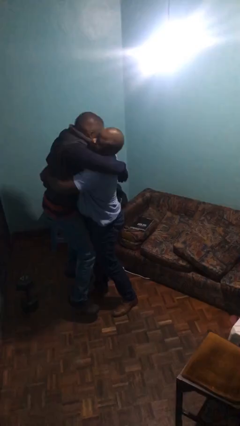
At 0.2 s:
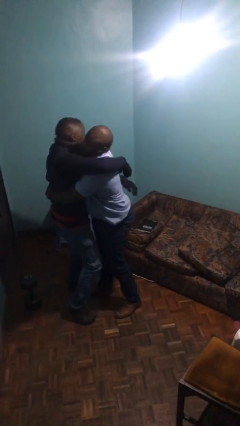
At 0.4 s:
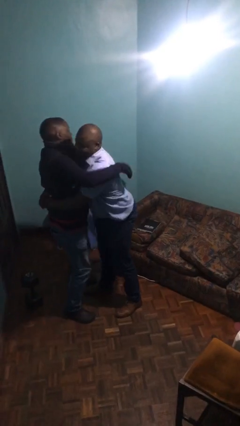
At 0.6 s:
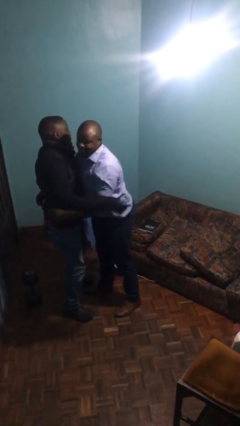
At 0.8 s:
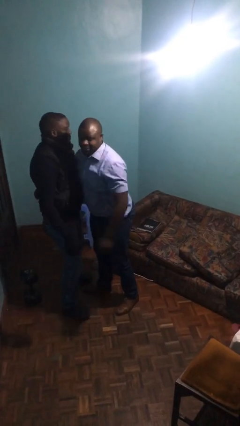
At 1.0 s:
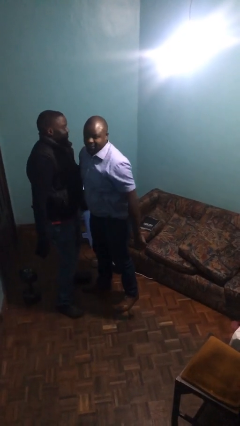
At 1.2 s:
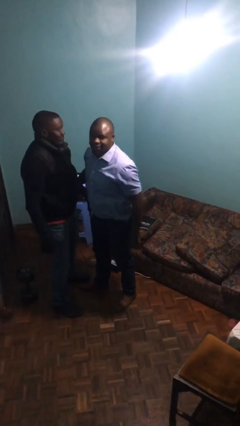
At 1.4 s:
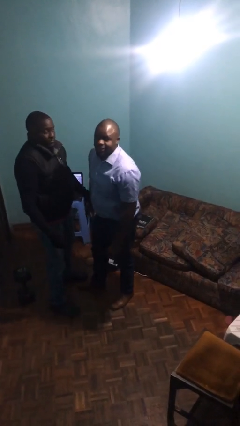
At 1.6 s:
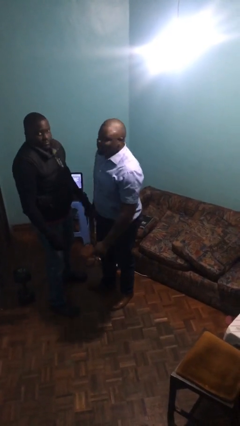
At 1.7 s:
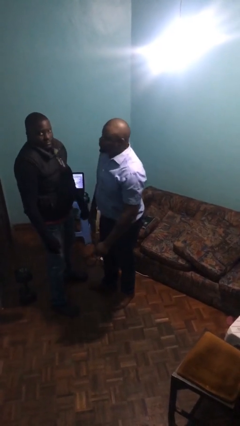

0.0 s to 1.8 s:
person puts down person

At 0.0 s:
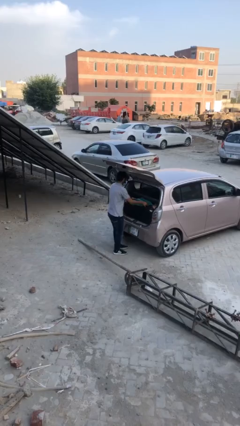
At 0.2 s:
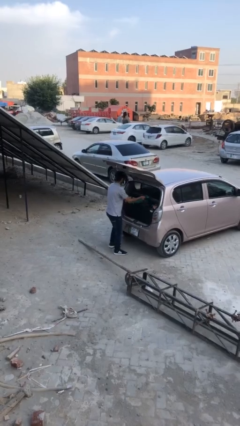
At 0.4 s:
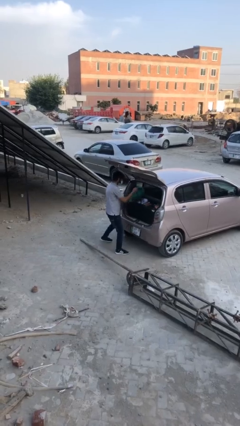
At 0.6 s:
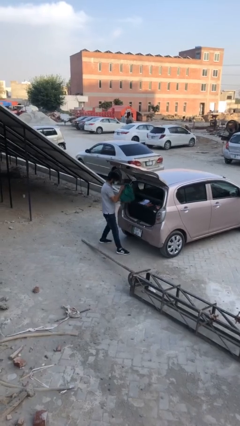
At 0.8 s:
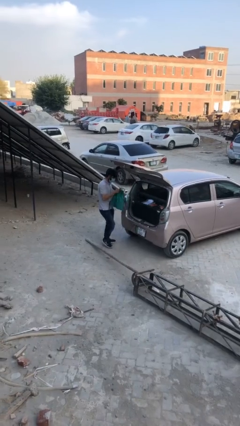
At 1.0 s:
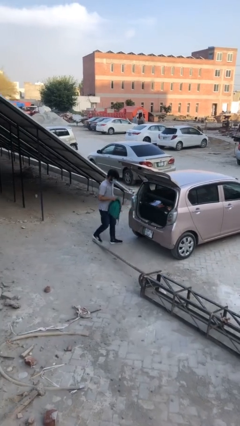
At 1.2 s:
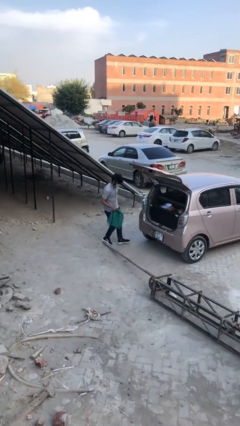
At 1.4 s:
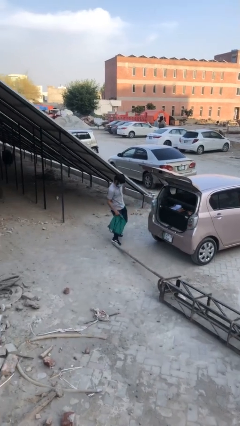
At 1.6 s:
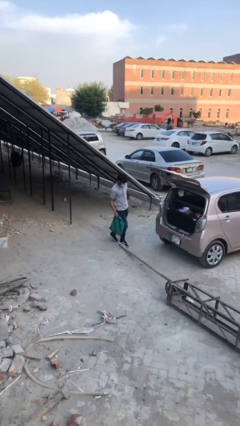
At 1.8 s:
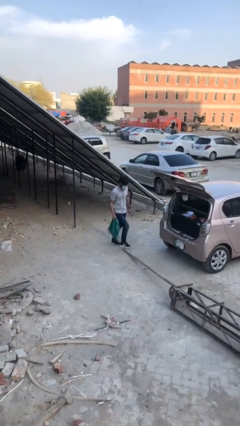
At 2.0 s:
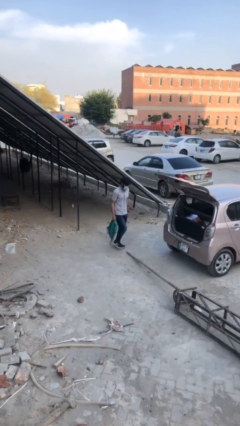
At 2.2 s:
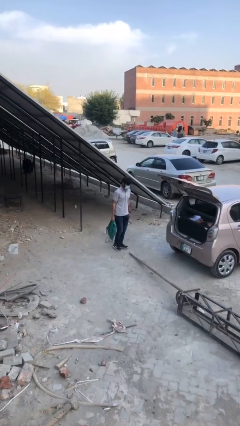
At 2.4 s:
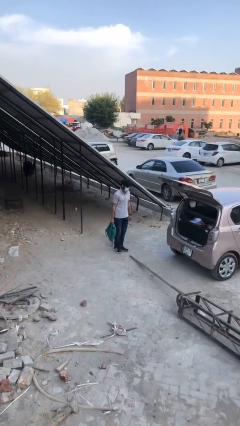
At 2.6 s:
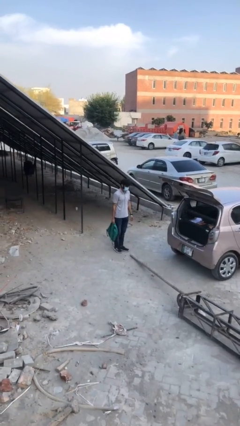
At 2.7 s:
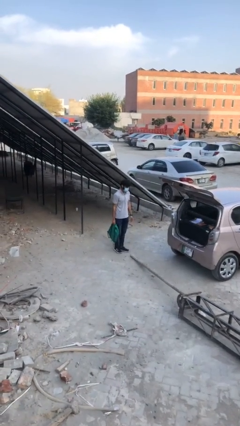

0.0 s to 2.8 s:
person unloads car

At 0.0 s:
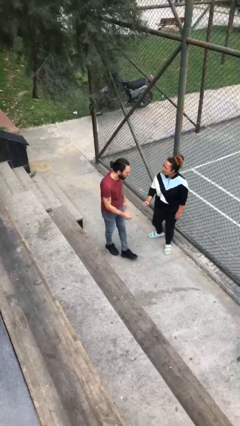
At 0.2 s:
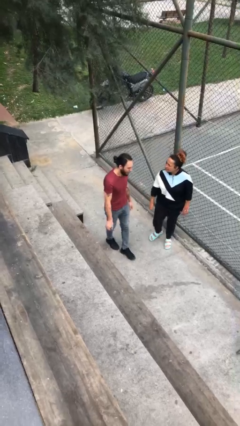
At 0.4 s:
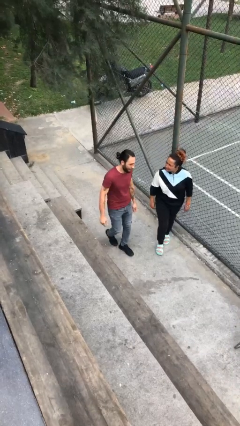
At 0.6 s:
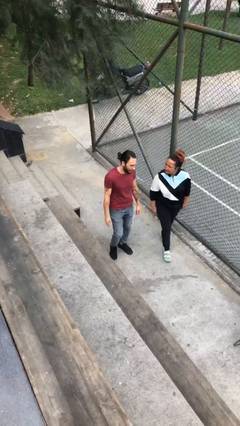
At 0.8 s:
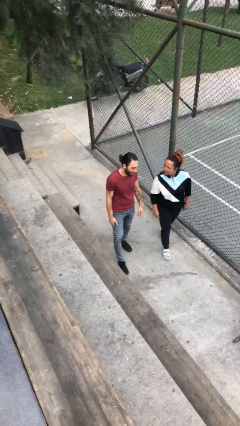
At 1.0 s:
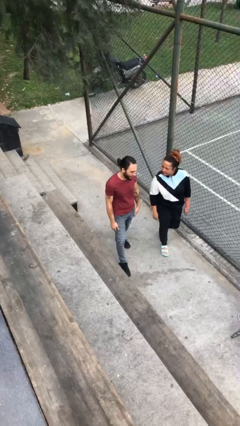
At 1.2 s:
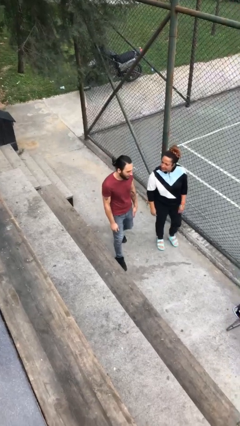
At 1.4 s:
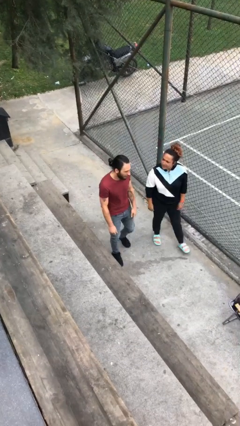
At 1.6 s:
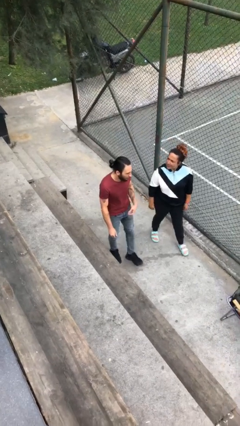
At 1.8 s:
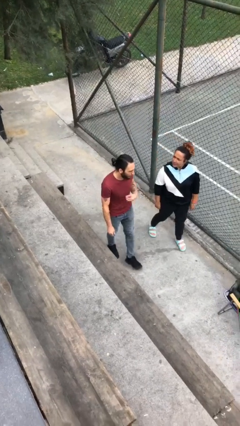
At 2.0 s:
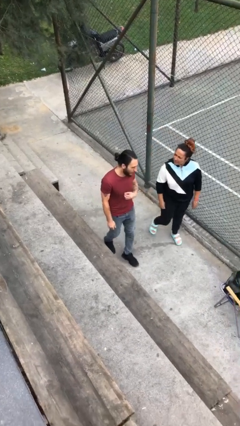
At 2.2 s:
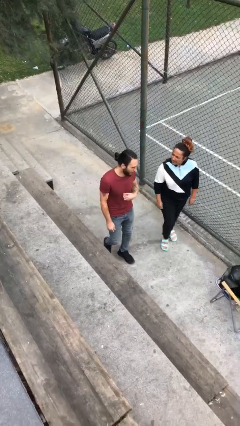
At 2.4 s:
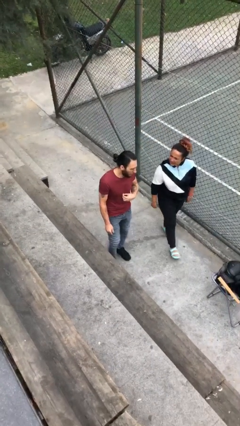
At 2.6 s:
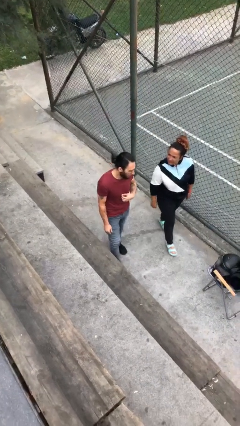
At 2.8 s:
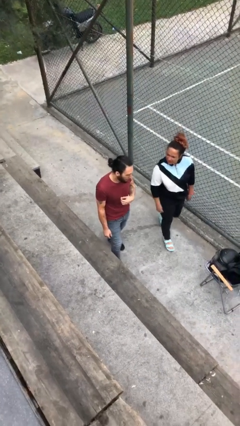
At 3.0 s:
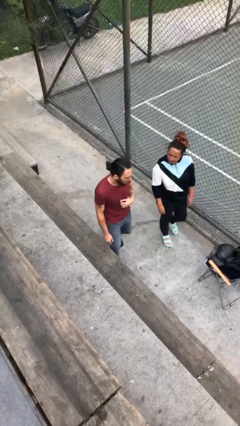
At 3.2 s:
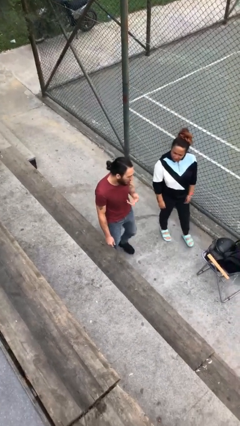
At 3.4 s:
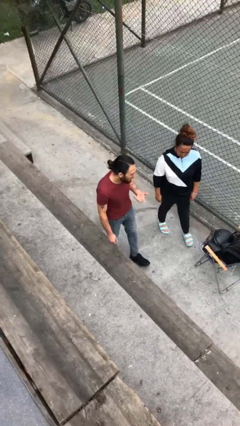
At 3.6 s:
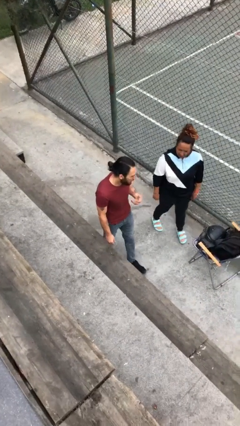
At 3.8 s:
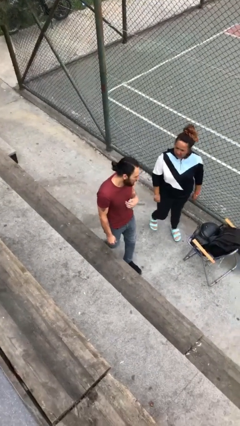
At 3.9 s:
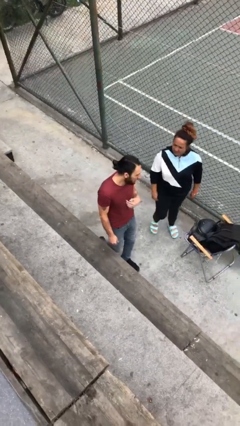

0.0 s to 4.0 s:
person talks to person

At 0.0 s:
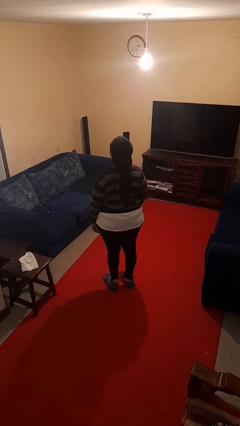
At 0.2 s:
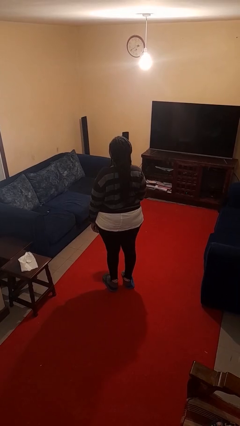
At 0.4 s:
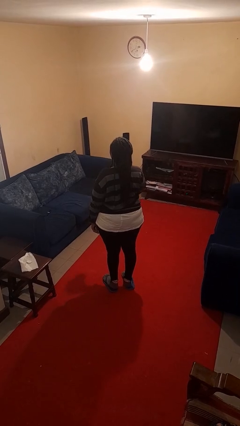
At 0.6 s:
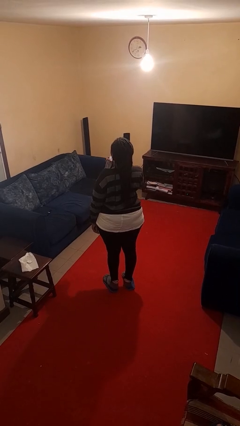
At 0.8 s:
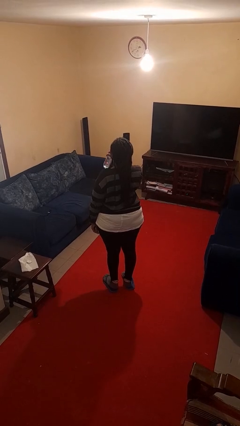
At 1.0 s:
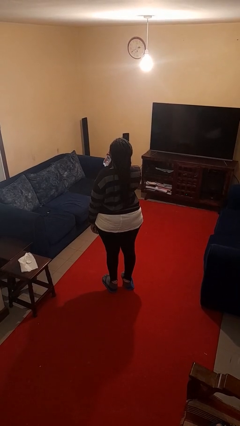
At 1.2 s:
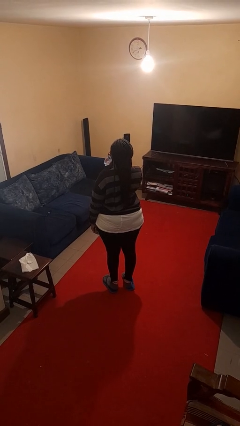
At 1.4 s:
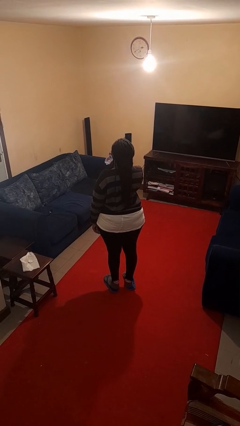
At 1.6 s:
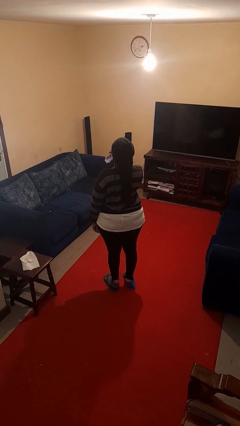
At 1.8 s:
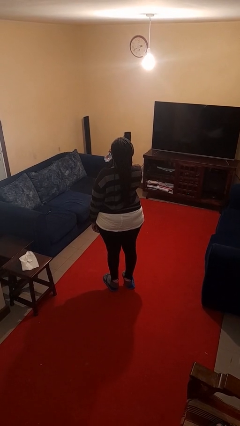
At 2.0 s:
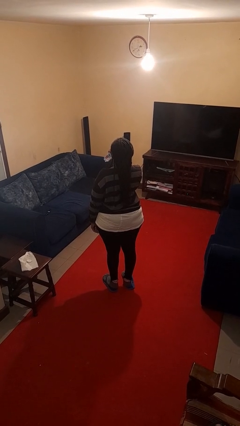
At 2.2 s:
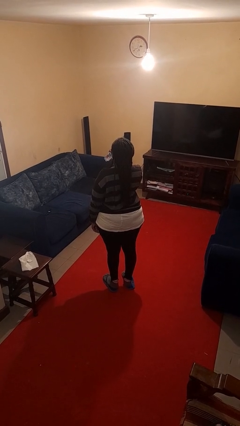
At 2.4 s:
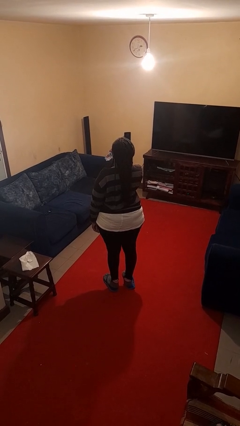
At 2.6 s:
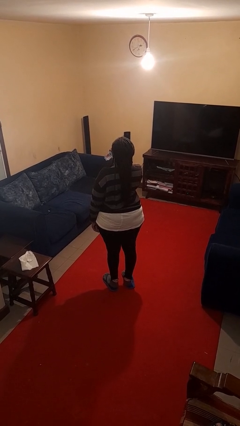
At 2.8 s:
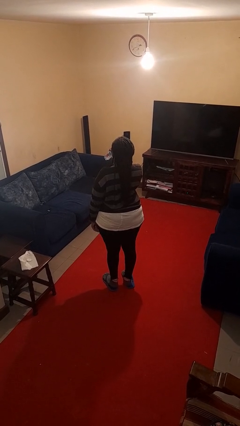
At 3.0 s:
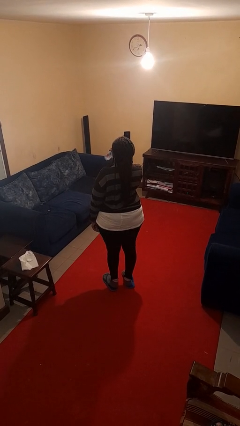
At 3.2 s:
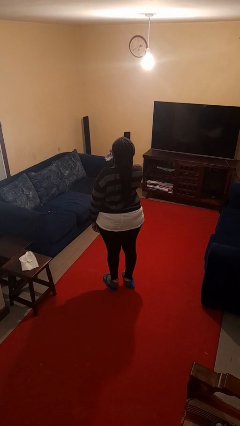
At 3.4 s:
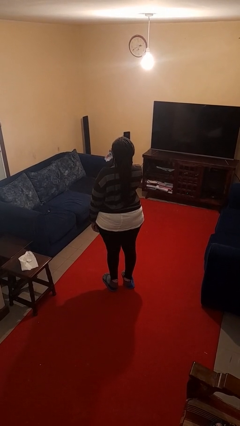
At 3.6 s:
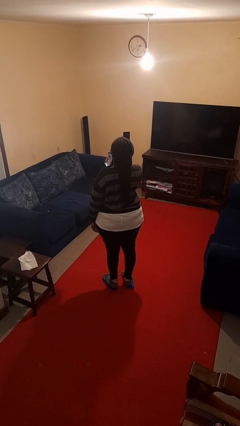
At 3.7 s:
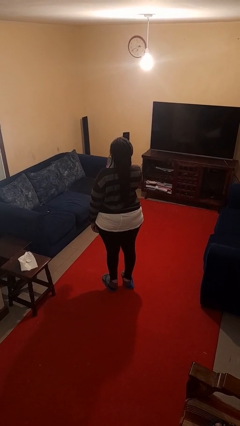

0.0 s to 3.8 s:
person drinks from bottle

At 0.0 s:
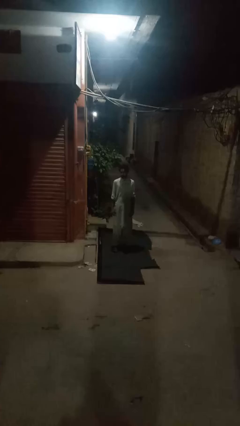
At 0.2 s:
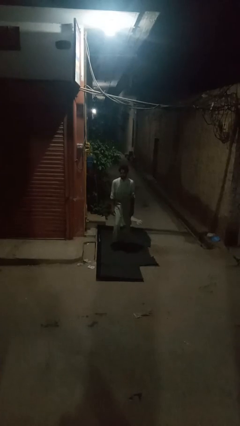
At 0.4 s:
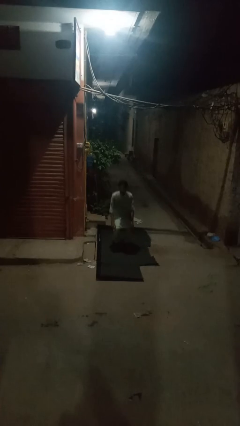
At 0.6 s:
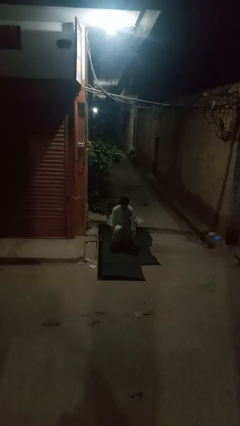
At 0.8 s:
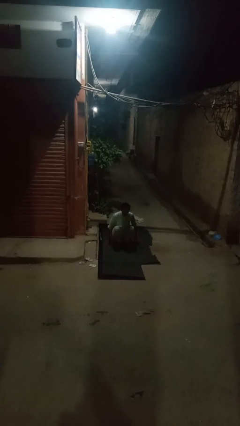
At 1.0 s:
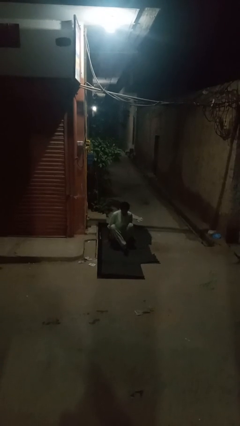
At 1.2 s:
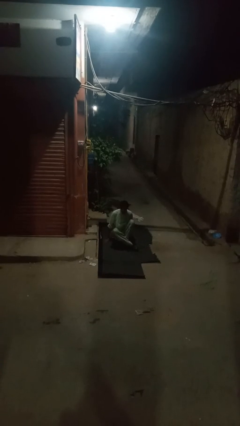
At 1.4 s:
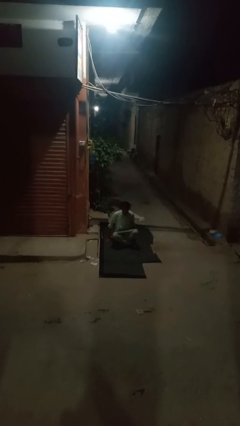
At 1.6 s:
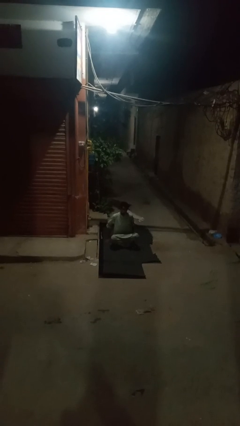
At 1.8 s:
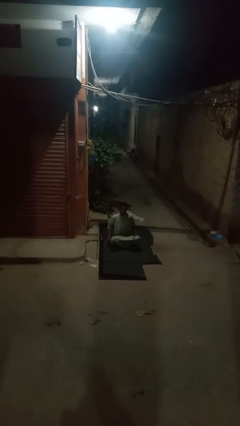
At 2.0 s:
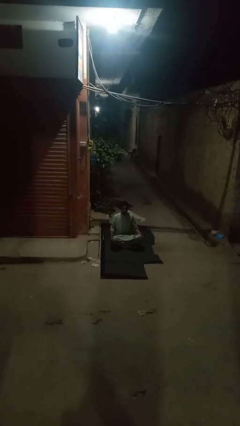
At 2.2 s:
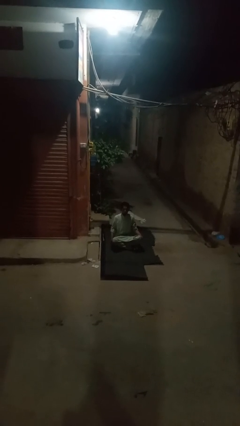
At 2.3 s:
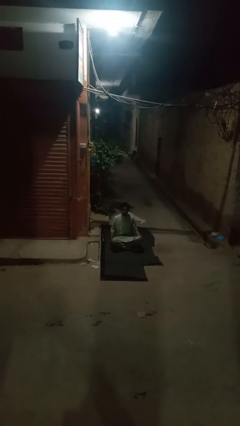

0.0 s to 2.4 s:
person sits crisscross

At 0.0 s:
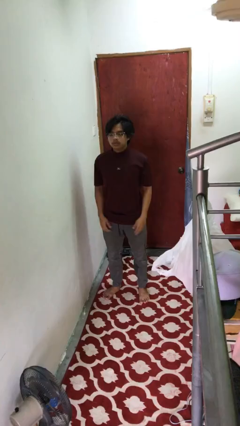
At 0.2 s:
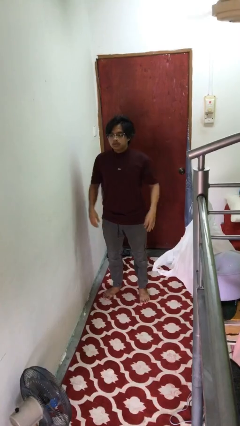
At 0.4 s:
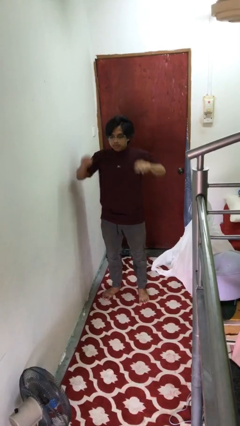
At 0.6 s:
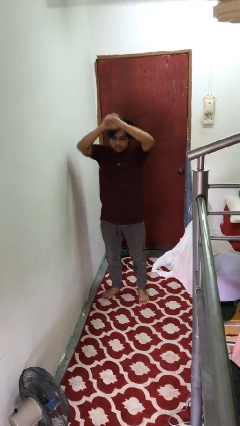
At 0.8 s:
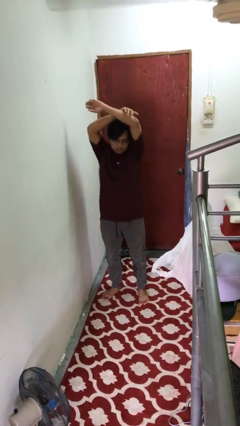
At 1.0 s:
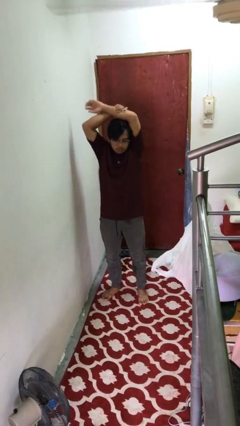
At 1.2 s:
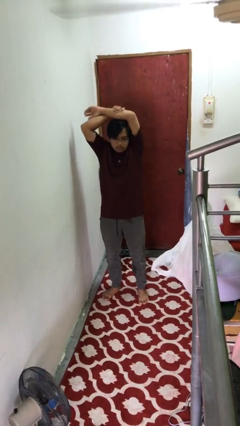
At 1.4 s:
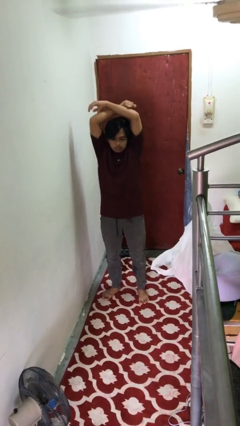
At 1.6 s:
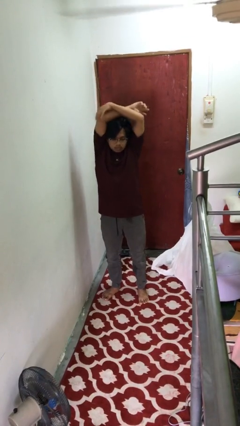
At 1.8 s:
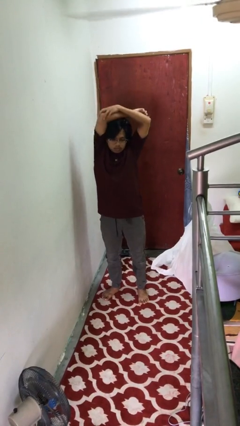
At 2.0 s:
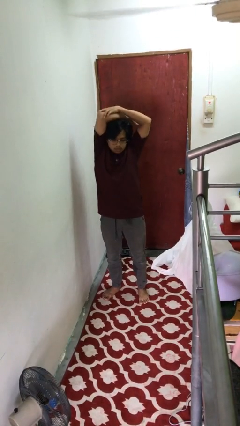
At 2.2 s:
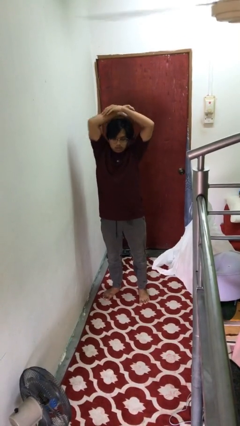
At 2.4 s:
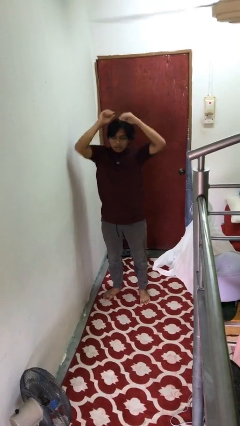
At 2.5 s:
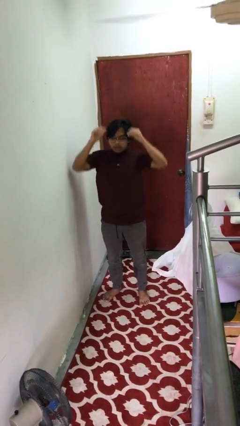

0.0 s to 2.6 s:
person stretches arms over head
